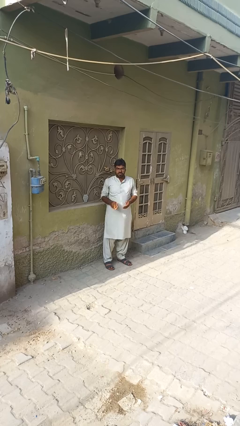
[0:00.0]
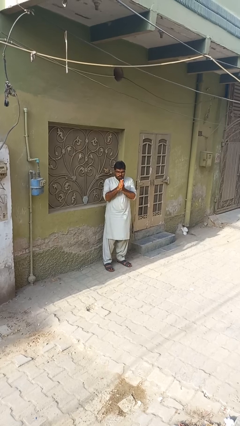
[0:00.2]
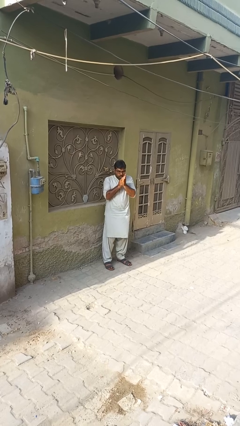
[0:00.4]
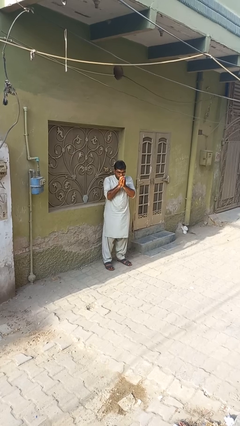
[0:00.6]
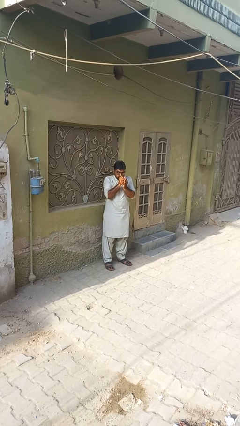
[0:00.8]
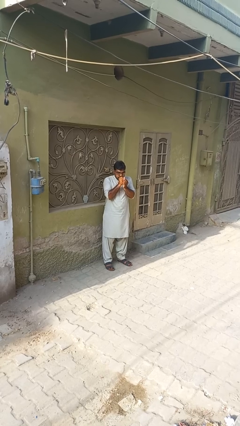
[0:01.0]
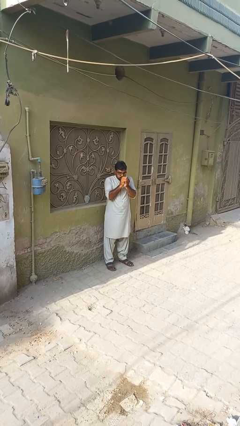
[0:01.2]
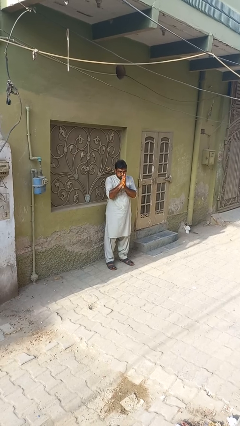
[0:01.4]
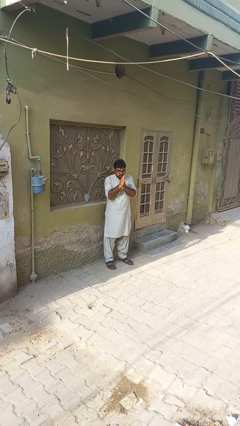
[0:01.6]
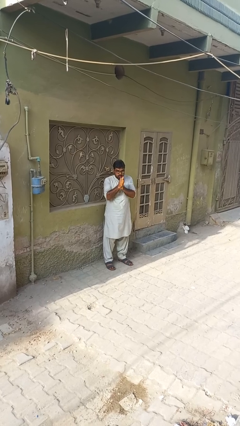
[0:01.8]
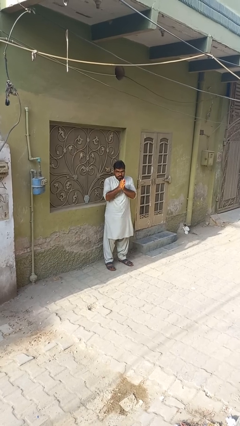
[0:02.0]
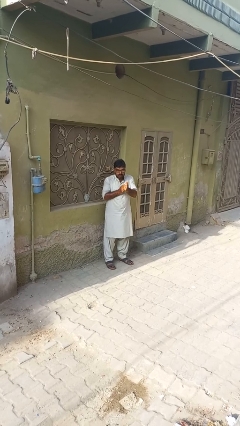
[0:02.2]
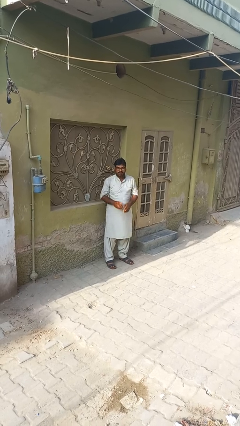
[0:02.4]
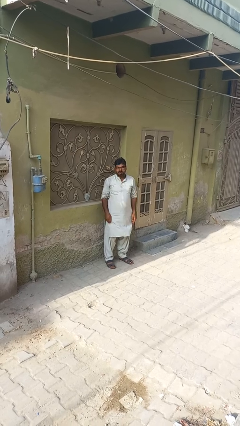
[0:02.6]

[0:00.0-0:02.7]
person blows into hands

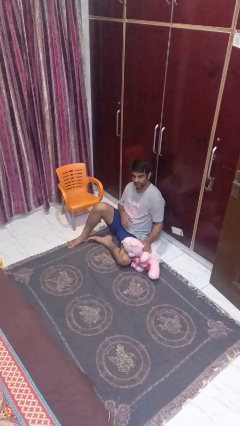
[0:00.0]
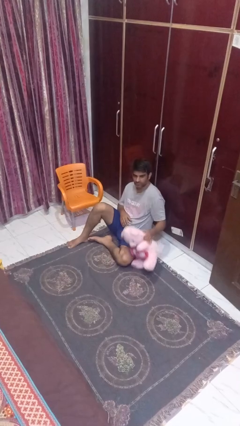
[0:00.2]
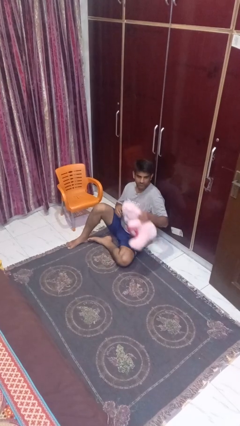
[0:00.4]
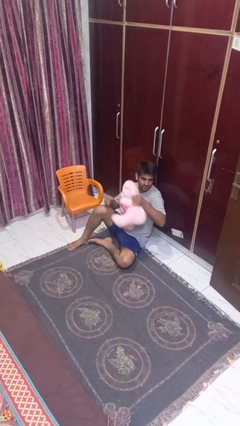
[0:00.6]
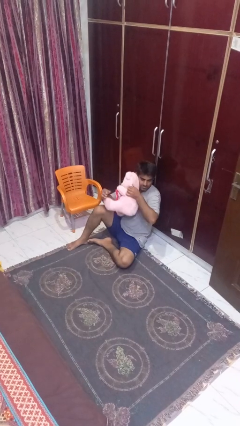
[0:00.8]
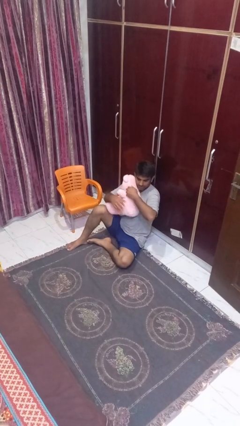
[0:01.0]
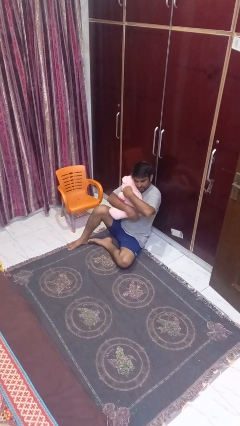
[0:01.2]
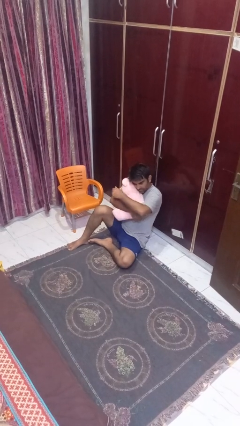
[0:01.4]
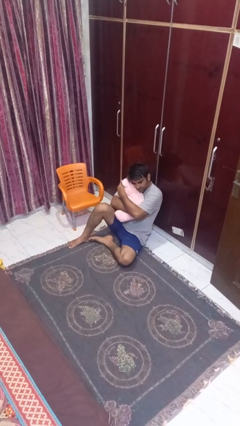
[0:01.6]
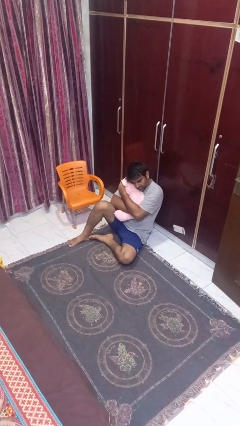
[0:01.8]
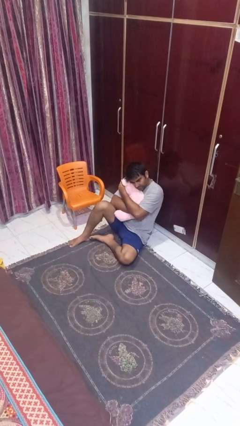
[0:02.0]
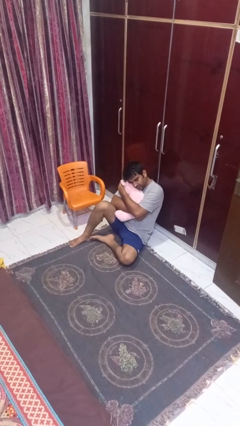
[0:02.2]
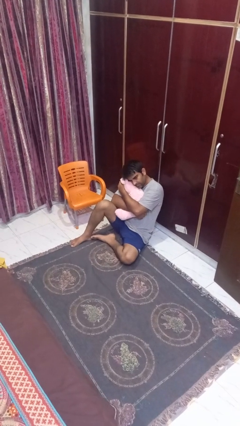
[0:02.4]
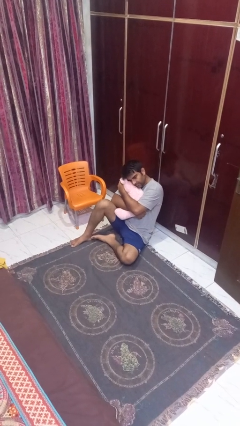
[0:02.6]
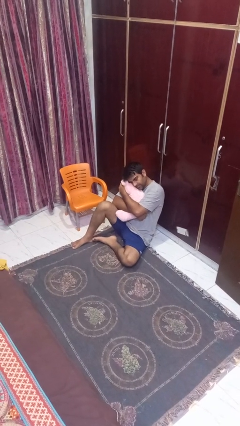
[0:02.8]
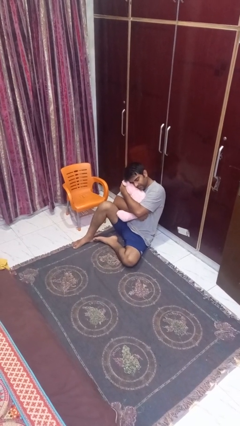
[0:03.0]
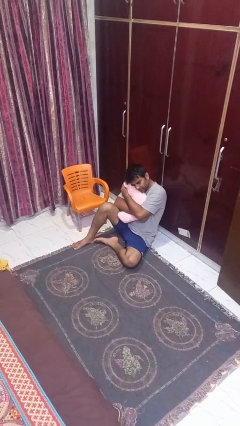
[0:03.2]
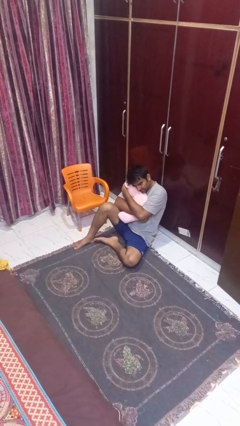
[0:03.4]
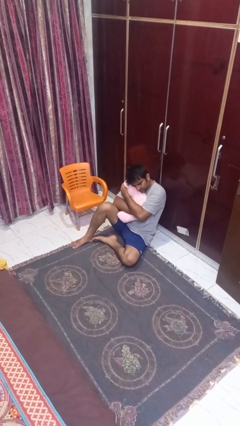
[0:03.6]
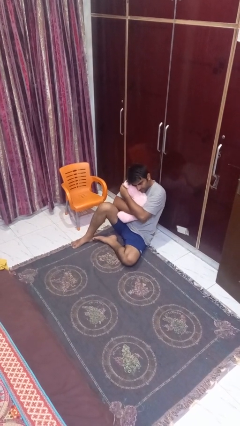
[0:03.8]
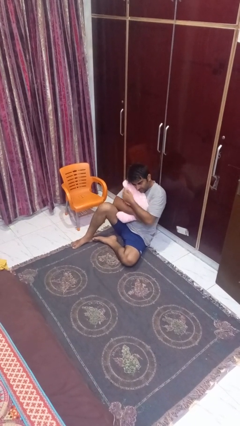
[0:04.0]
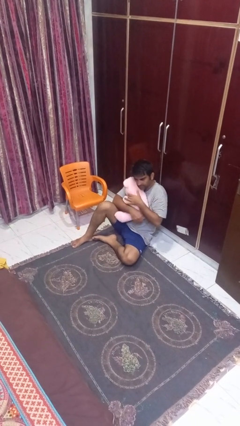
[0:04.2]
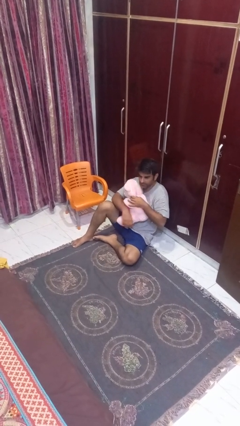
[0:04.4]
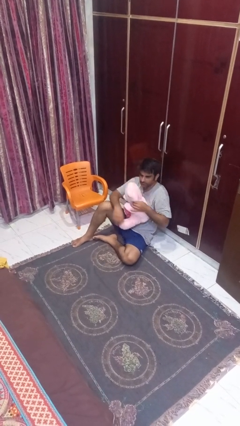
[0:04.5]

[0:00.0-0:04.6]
person hugs stuffed animal

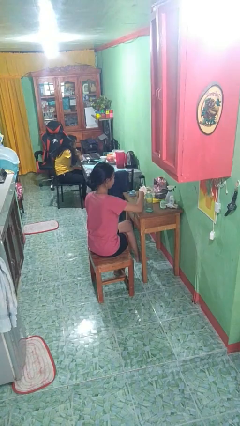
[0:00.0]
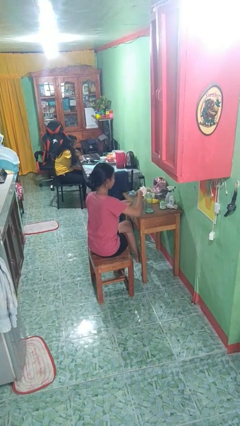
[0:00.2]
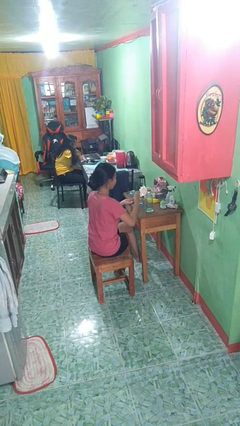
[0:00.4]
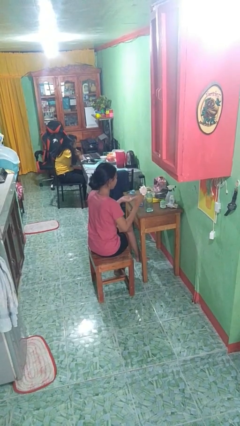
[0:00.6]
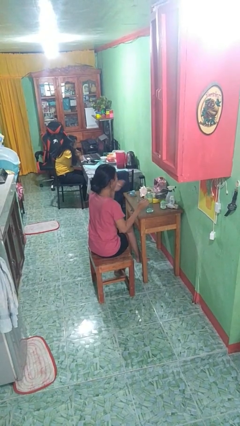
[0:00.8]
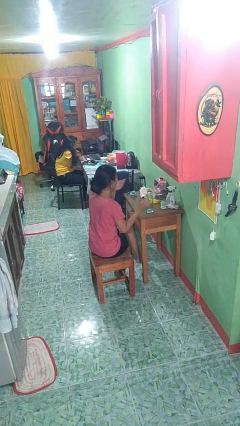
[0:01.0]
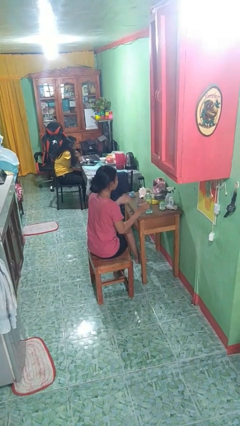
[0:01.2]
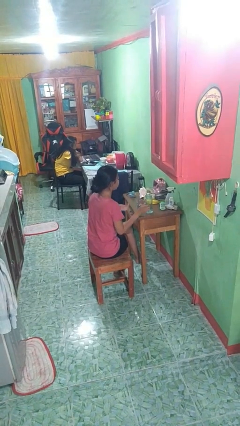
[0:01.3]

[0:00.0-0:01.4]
person takes medicine pills

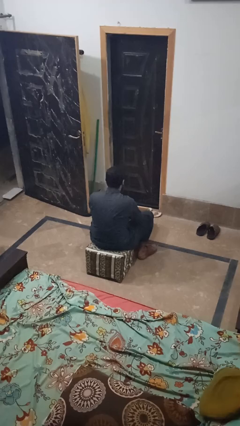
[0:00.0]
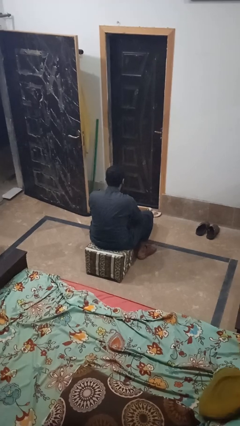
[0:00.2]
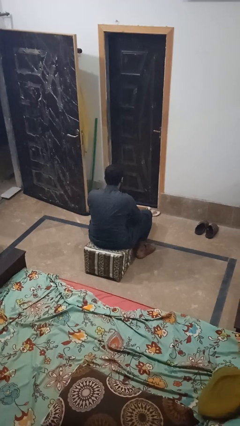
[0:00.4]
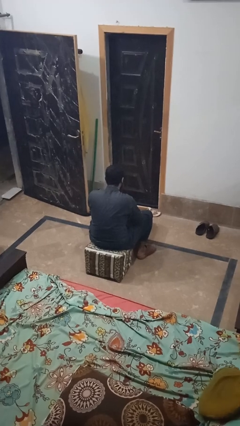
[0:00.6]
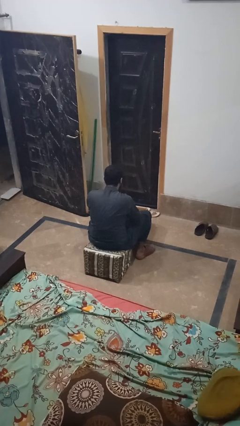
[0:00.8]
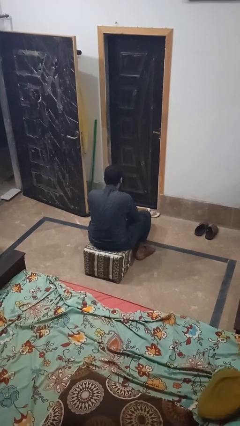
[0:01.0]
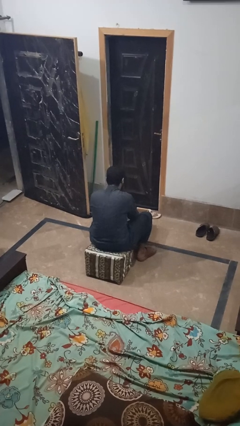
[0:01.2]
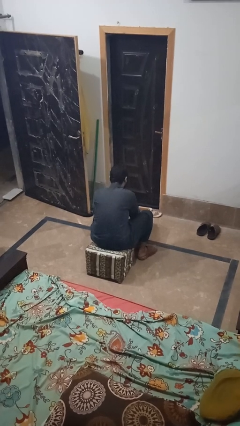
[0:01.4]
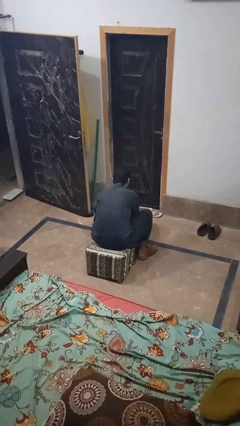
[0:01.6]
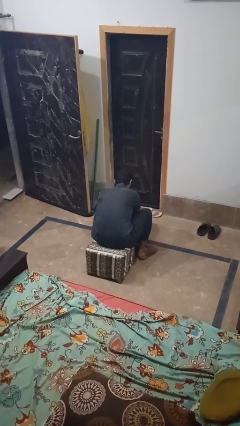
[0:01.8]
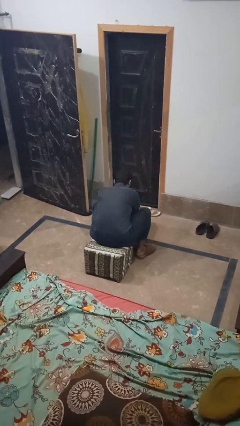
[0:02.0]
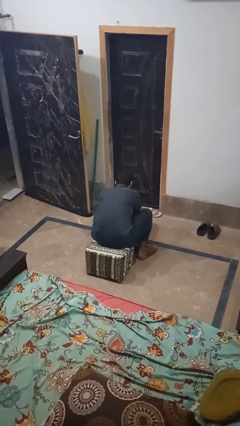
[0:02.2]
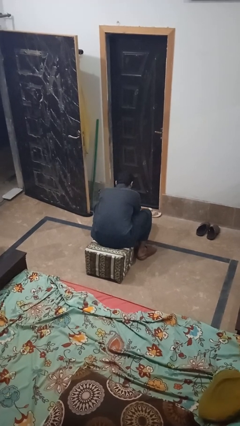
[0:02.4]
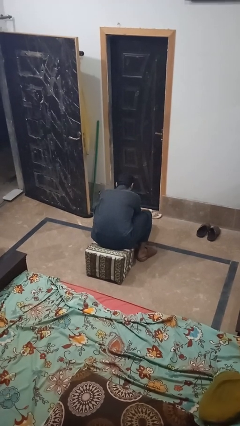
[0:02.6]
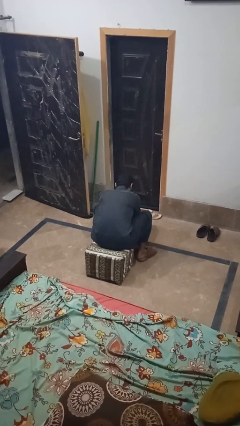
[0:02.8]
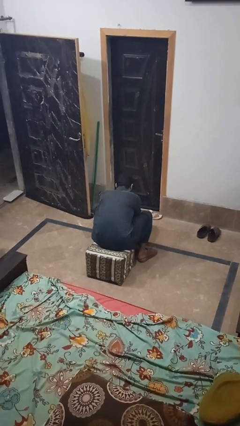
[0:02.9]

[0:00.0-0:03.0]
person searches in box

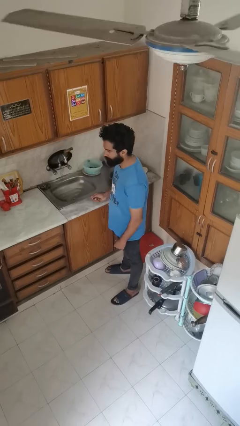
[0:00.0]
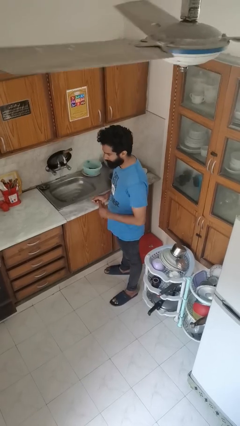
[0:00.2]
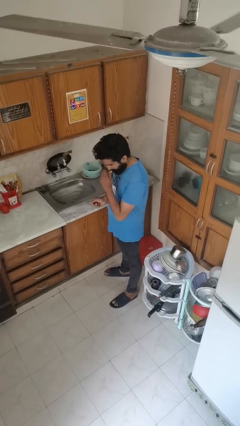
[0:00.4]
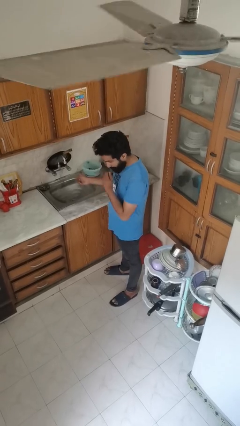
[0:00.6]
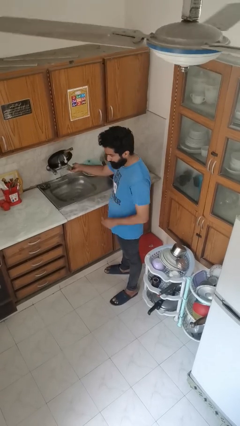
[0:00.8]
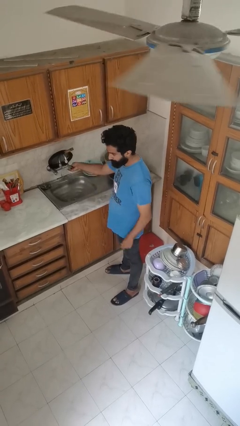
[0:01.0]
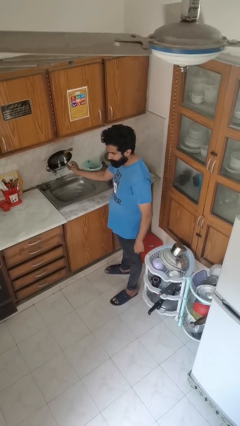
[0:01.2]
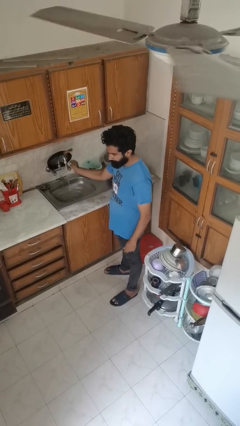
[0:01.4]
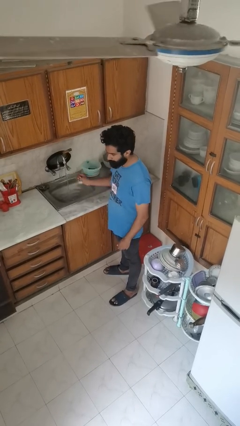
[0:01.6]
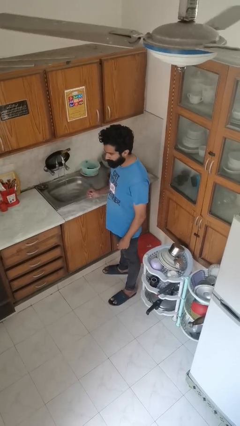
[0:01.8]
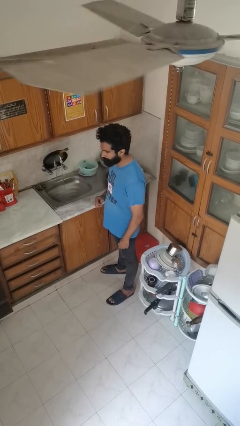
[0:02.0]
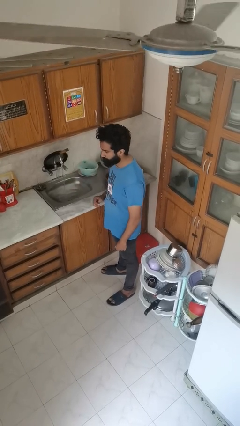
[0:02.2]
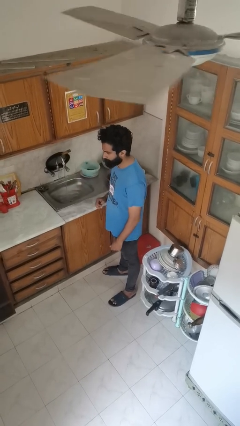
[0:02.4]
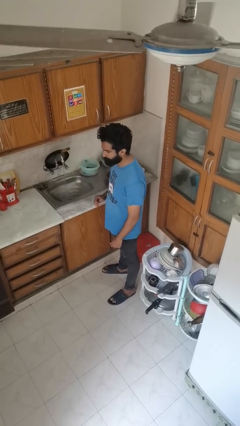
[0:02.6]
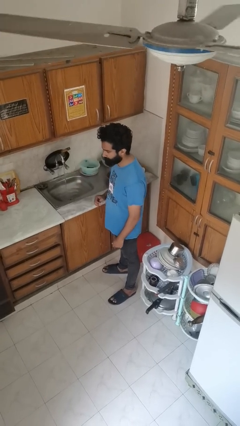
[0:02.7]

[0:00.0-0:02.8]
person turns on faucet

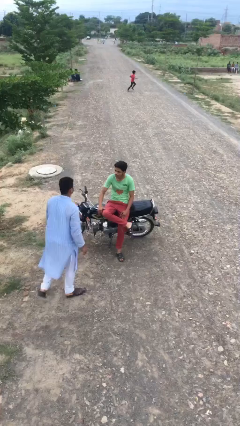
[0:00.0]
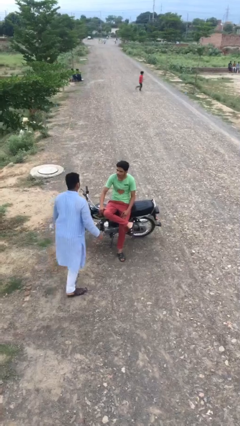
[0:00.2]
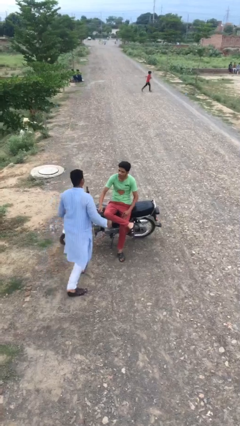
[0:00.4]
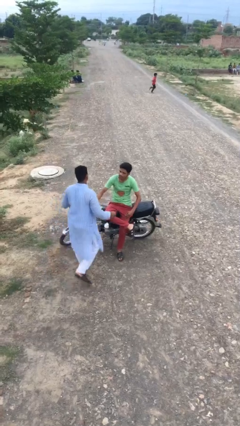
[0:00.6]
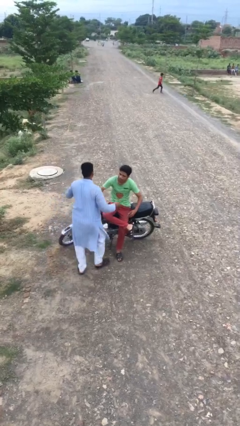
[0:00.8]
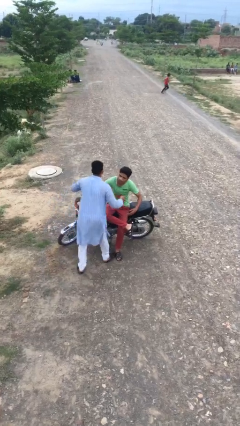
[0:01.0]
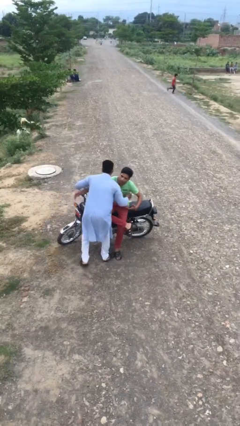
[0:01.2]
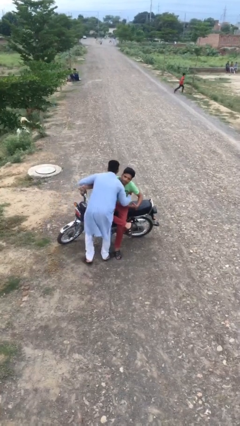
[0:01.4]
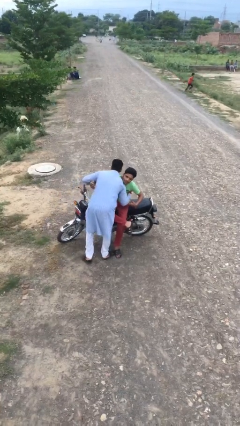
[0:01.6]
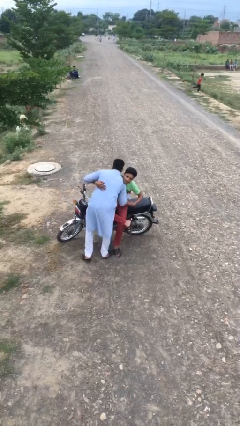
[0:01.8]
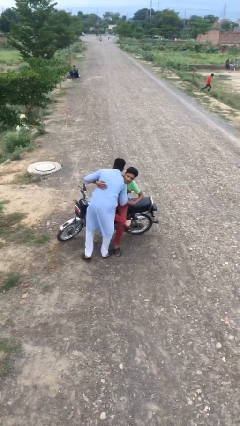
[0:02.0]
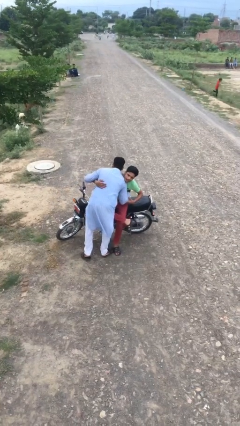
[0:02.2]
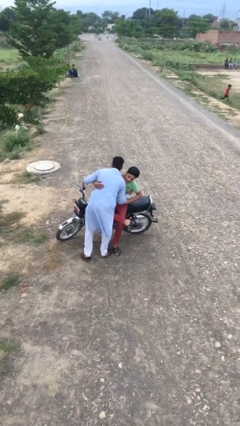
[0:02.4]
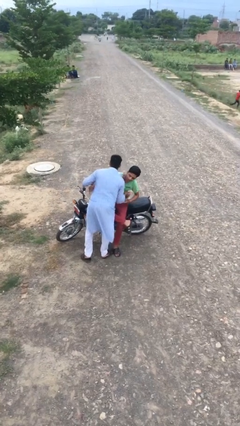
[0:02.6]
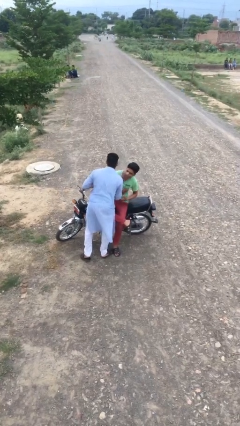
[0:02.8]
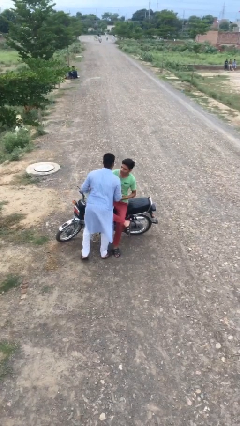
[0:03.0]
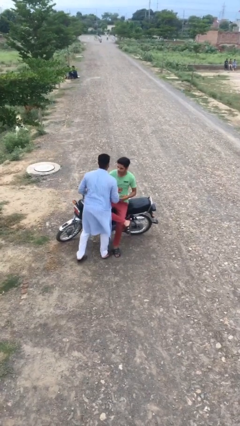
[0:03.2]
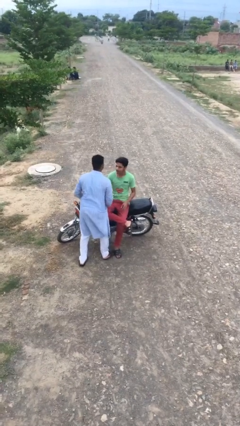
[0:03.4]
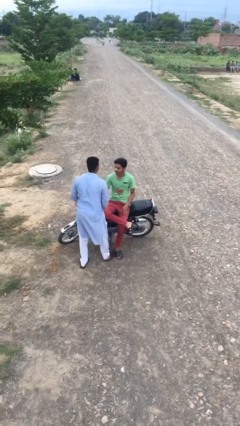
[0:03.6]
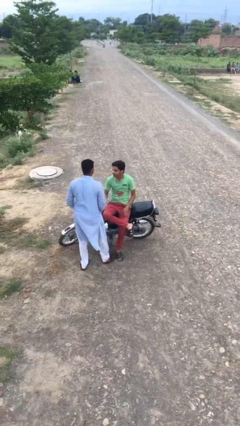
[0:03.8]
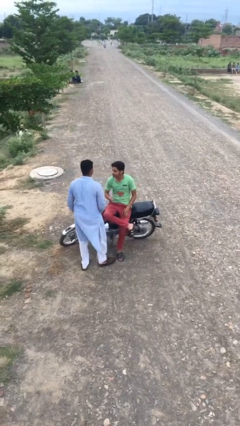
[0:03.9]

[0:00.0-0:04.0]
person embraces person
